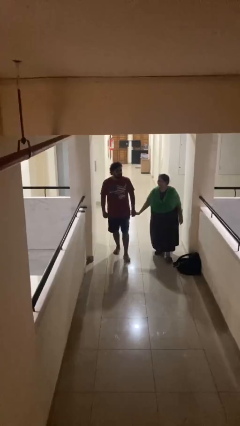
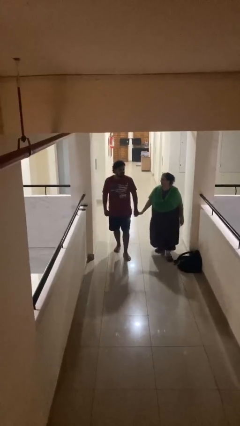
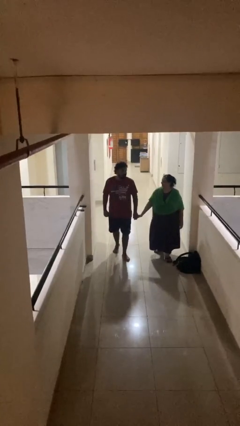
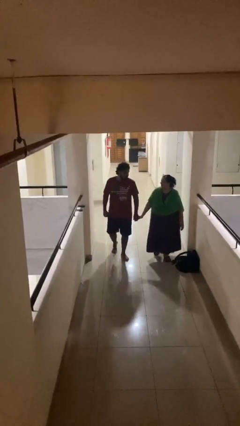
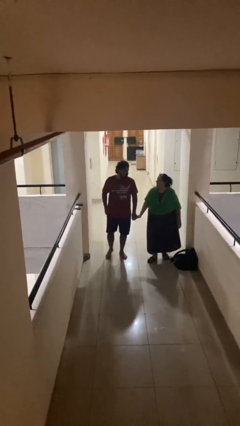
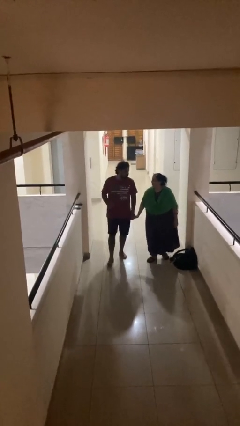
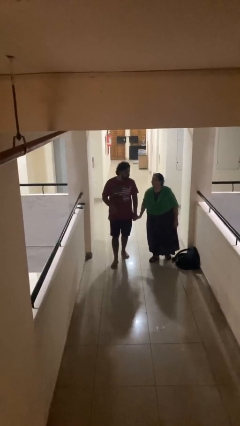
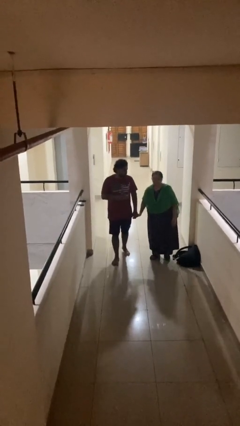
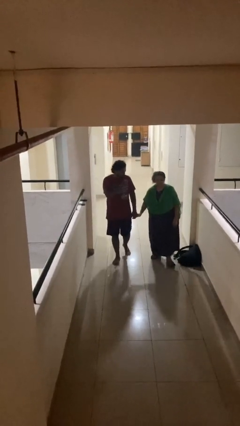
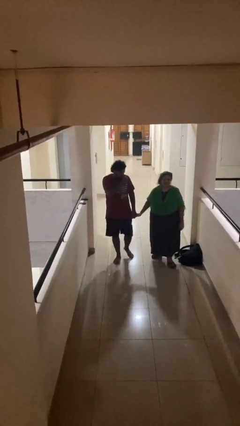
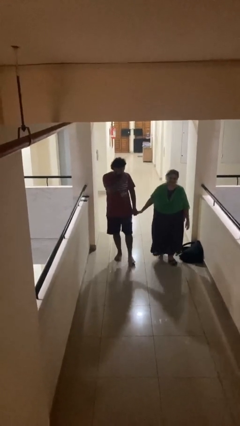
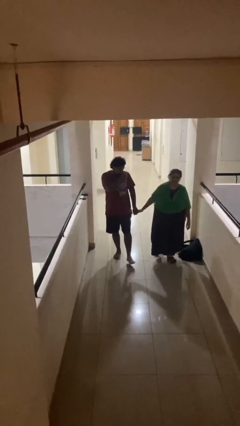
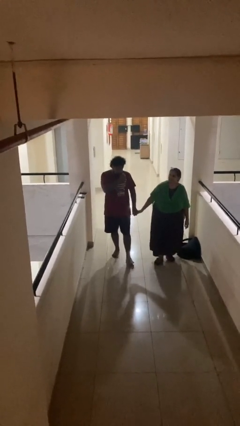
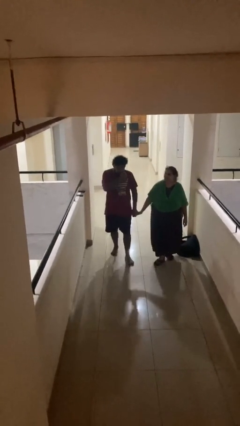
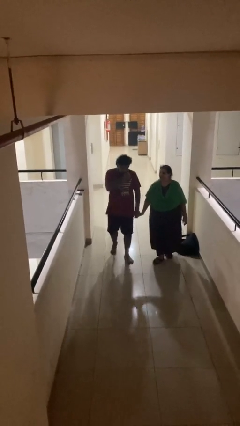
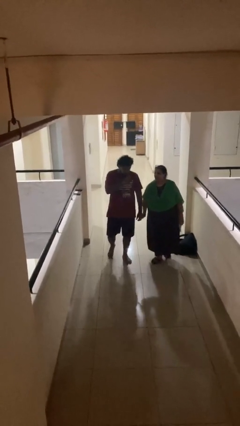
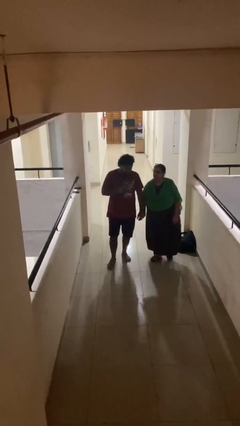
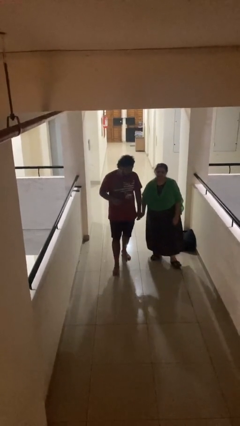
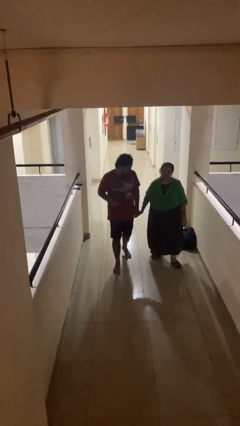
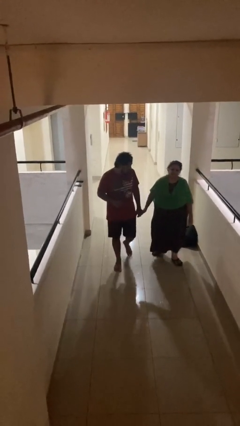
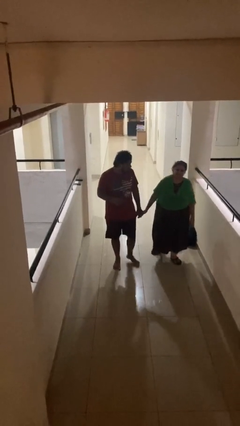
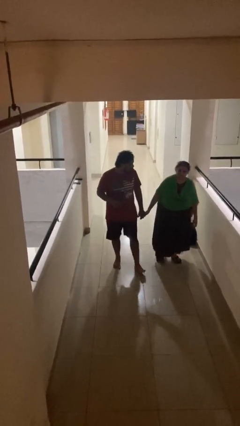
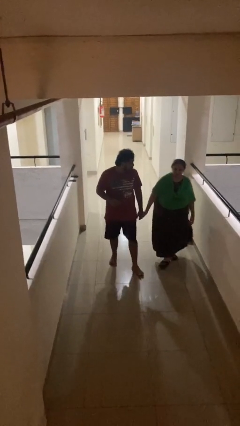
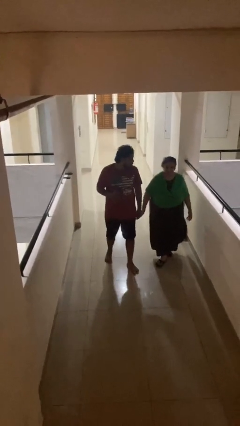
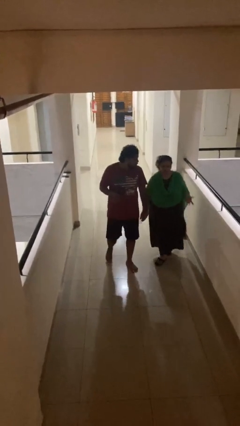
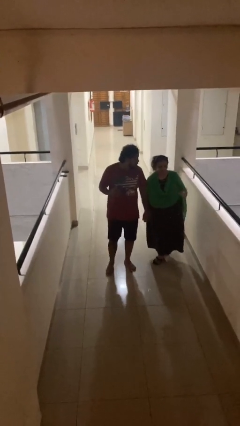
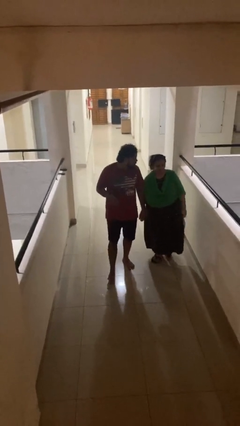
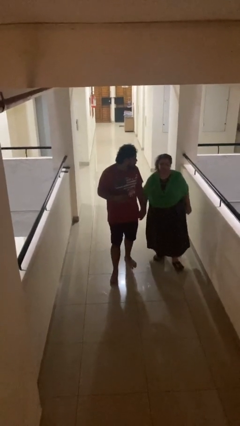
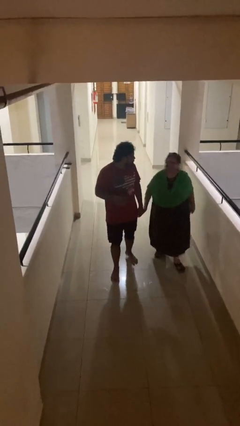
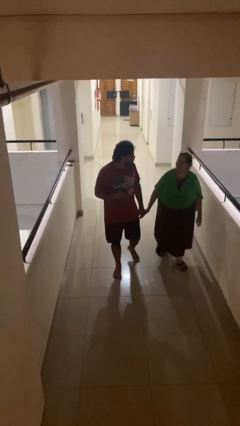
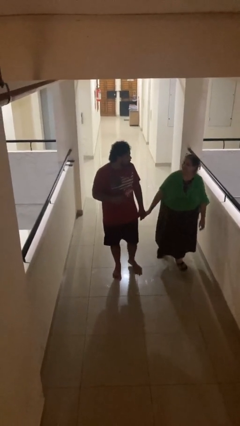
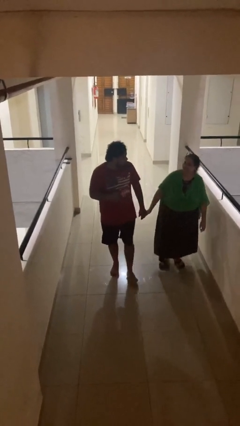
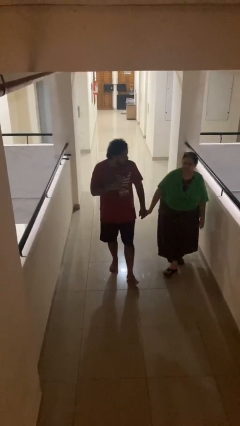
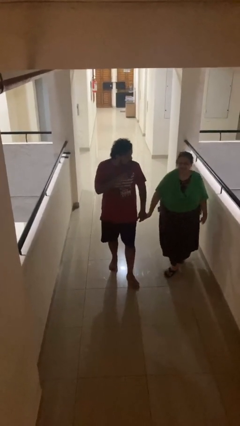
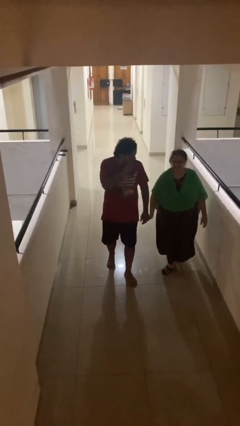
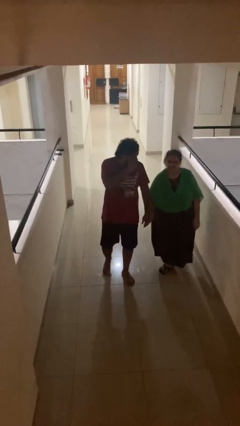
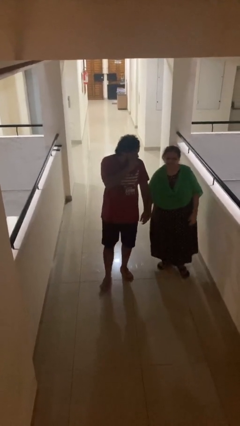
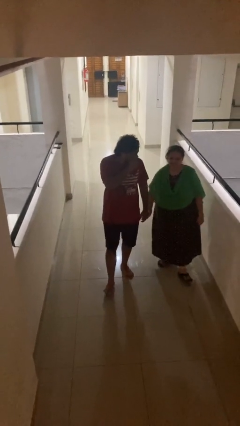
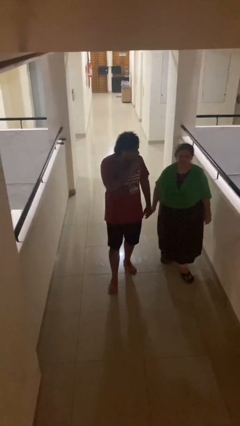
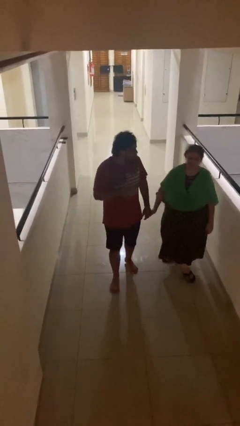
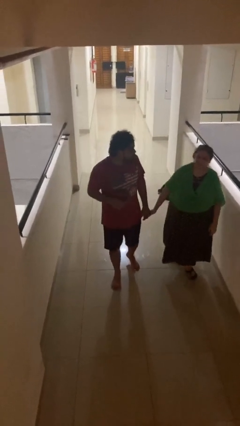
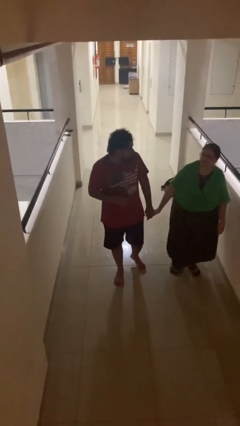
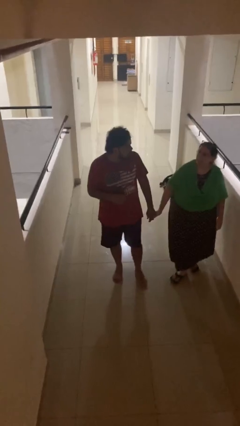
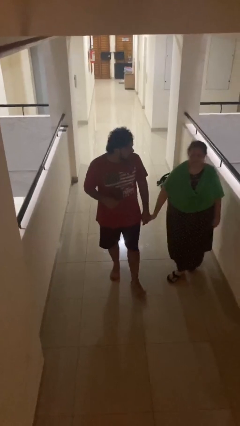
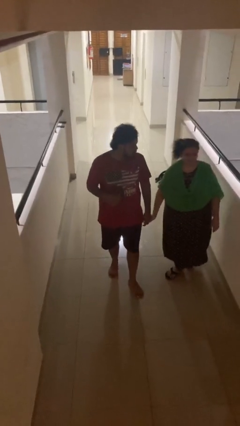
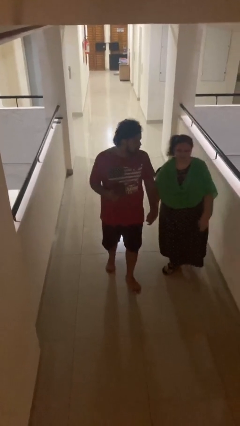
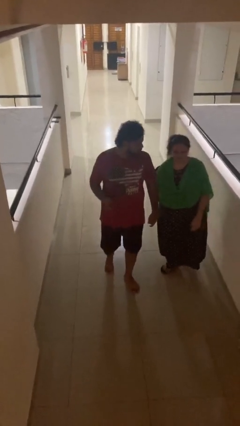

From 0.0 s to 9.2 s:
person holds hand

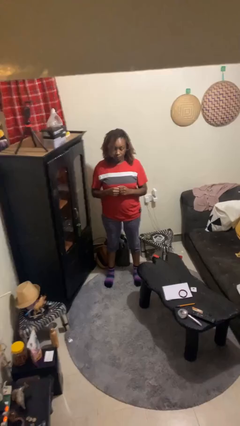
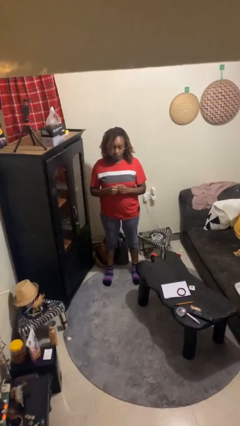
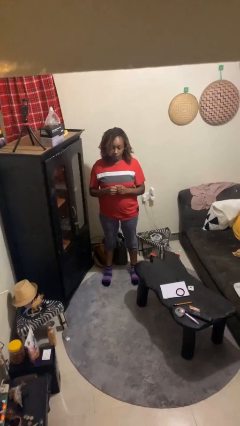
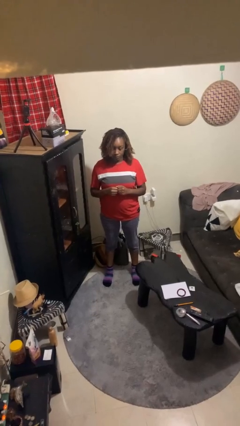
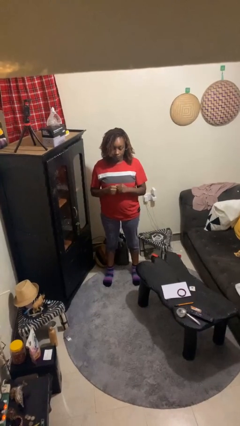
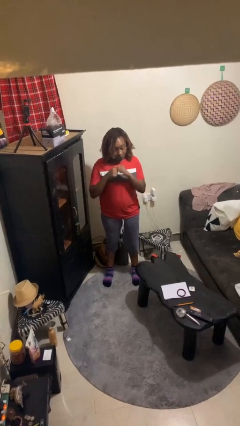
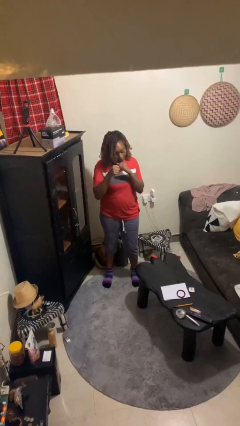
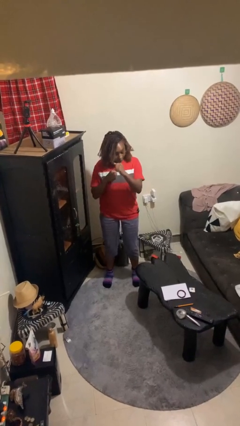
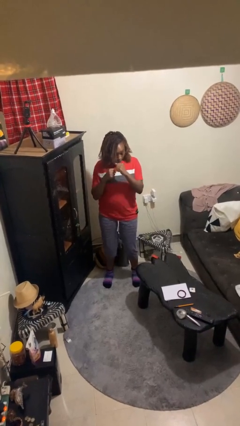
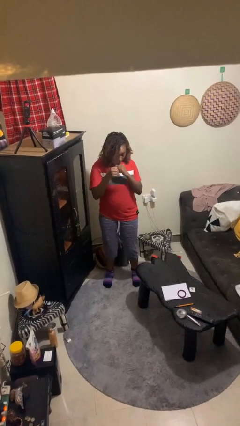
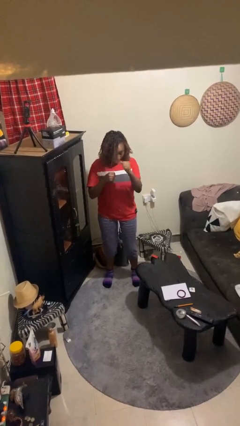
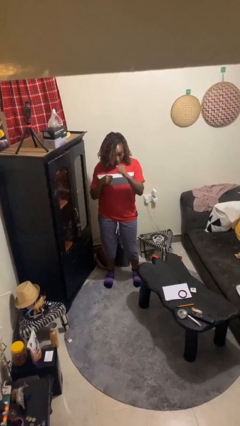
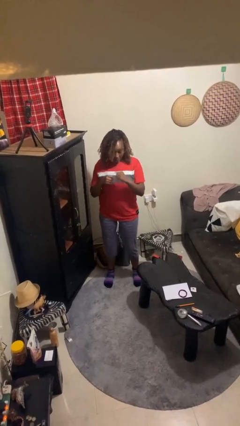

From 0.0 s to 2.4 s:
person punches

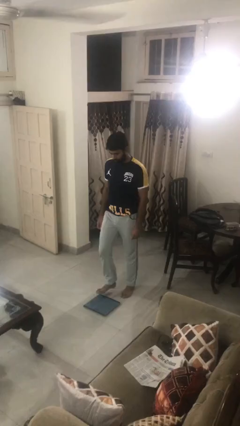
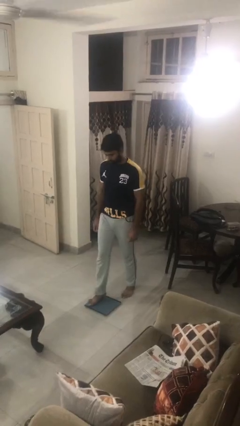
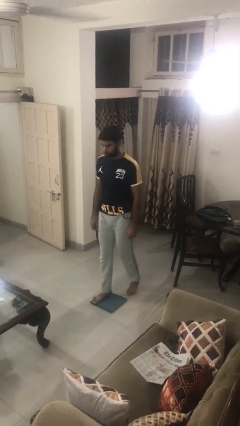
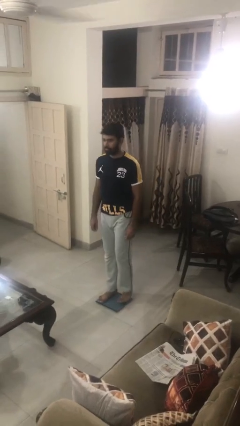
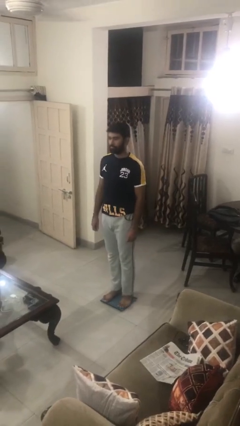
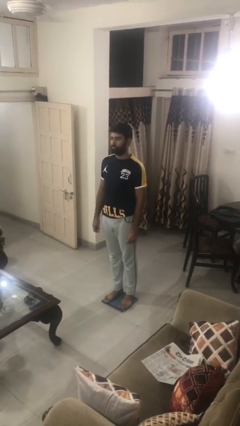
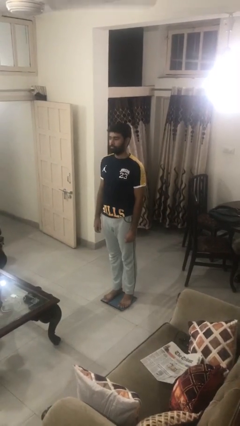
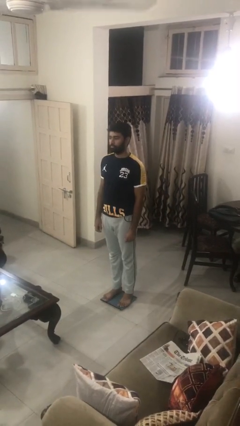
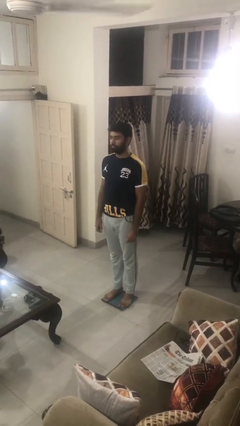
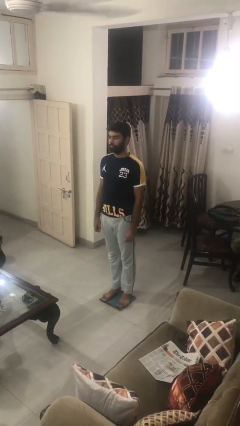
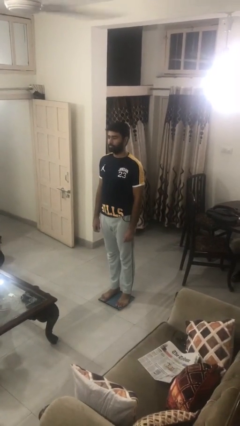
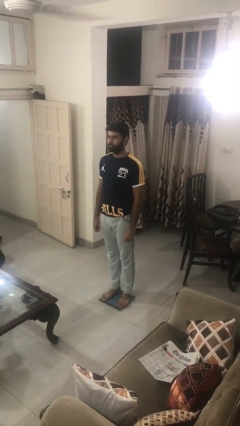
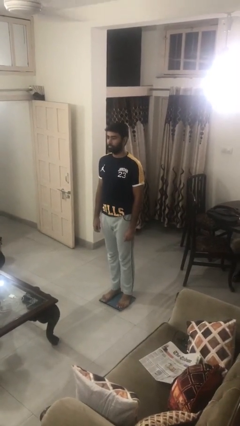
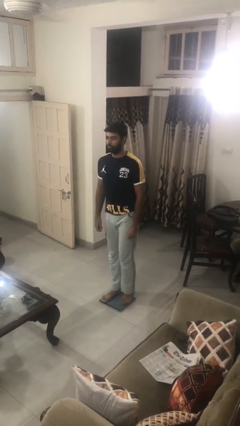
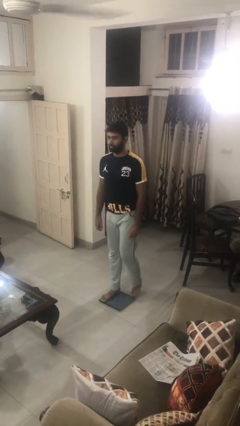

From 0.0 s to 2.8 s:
person uses bodyweight scale

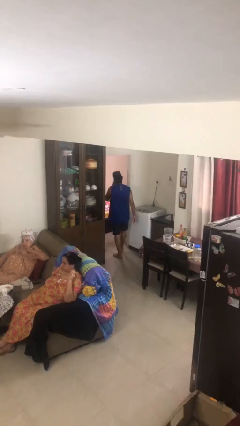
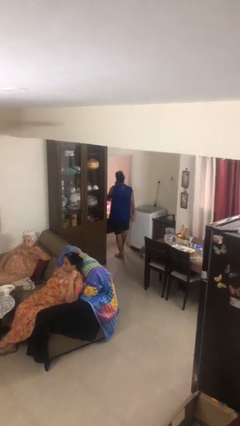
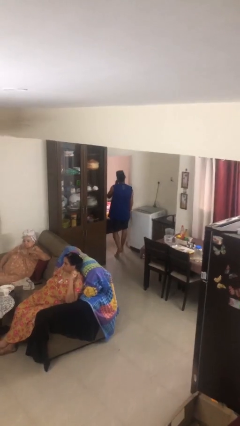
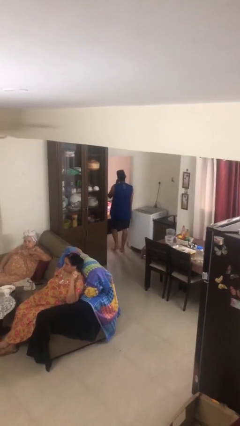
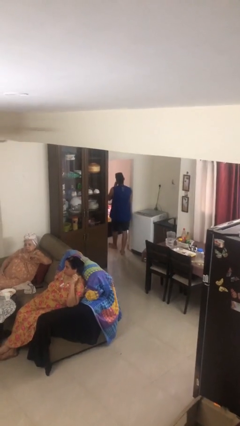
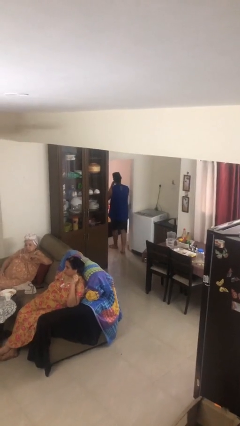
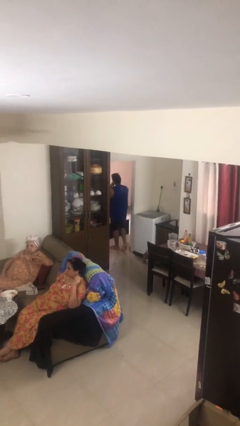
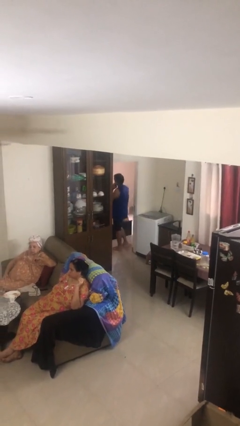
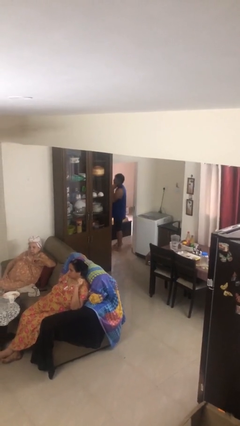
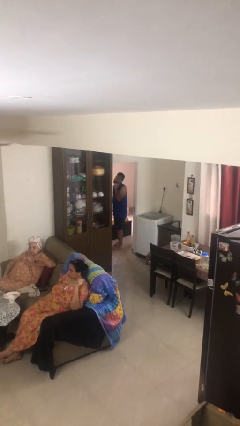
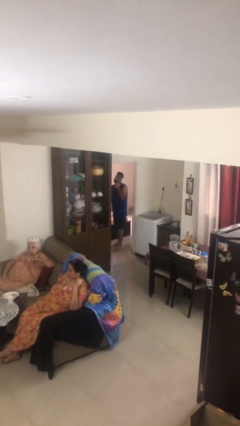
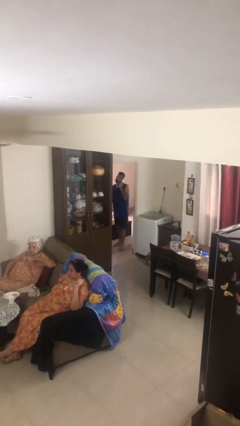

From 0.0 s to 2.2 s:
person exits scene through structure

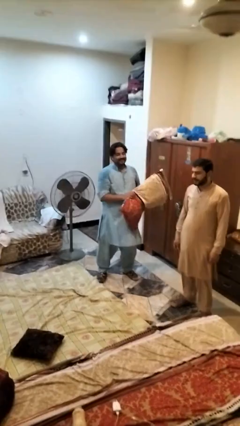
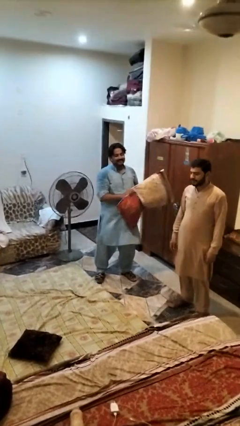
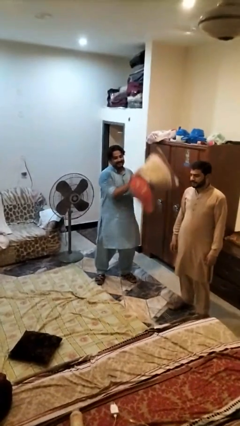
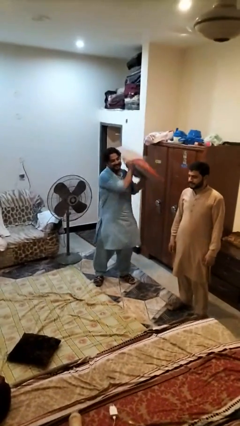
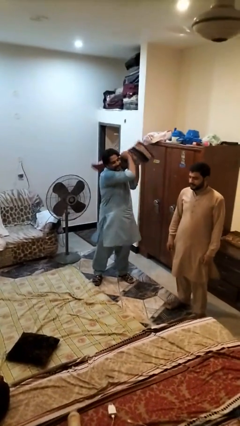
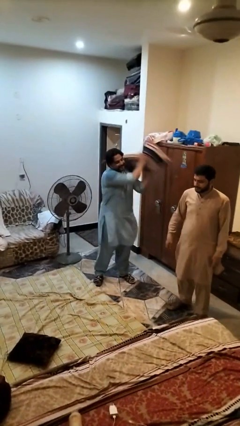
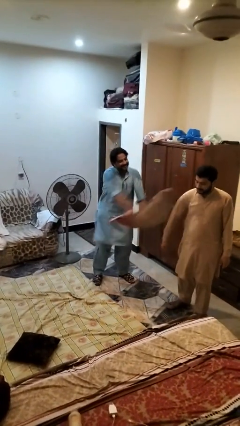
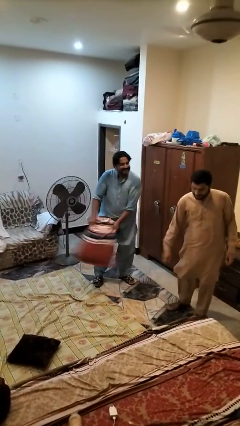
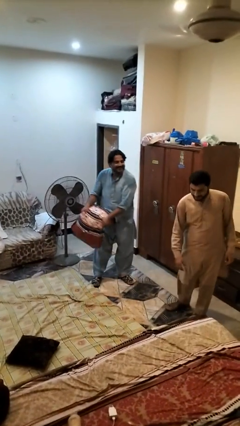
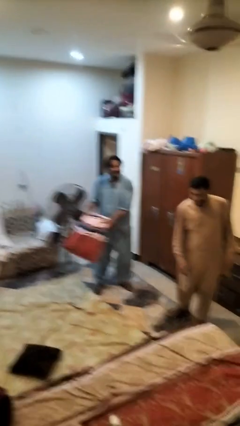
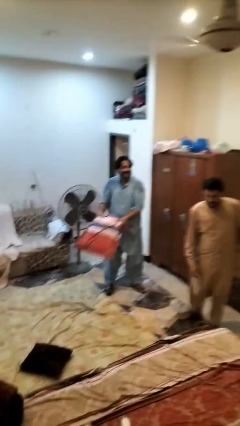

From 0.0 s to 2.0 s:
person hits person with pillow
